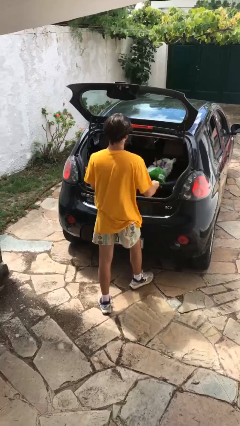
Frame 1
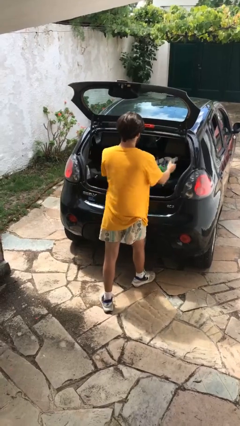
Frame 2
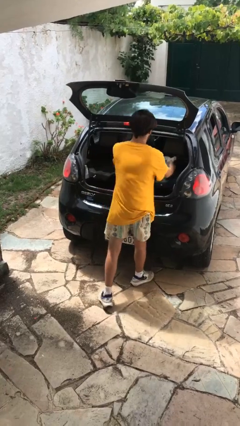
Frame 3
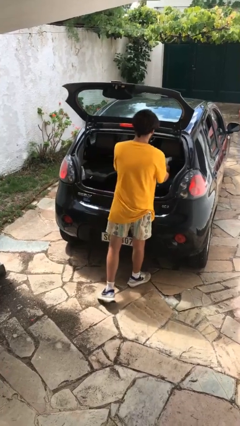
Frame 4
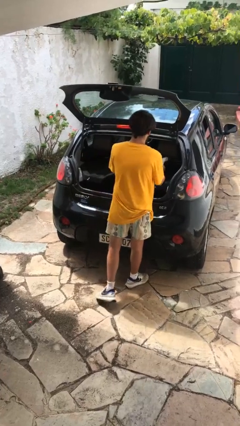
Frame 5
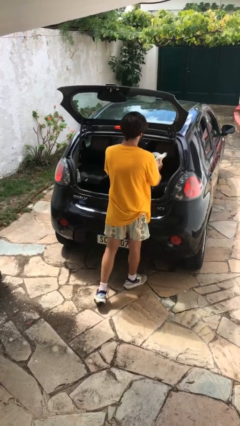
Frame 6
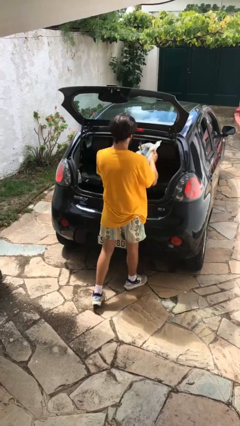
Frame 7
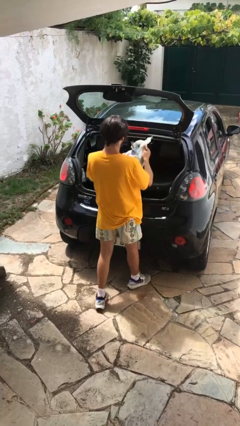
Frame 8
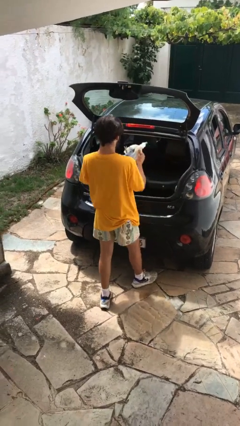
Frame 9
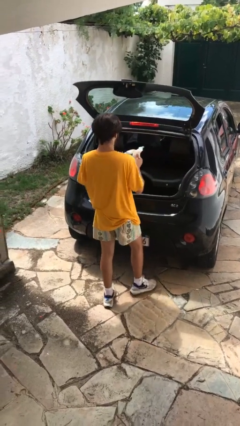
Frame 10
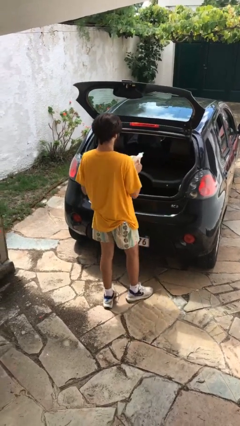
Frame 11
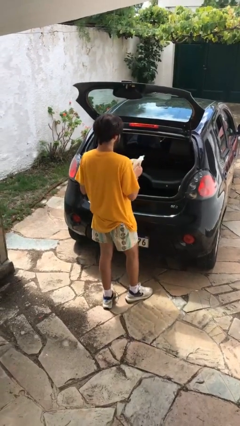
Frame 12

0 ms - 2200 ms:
person unloads car

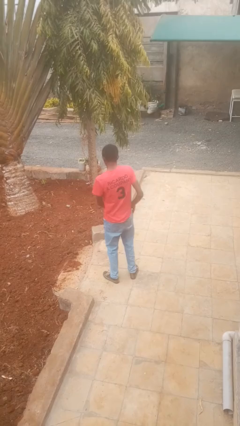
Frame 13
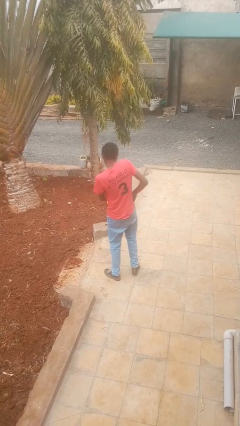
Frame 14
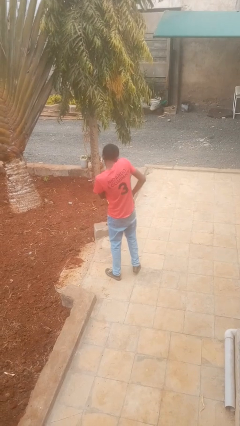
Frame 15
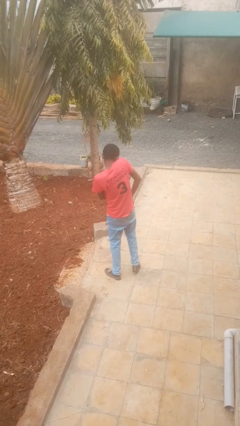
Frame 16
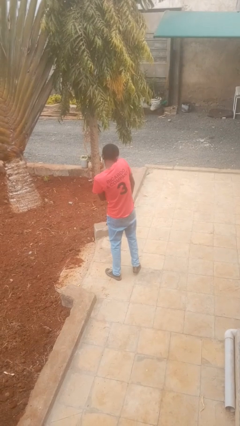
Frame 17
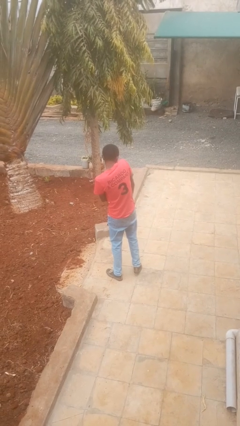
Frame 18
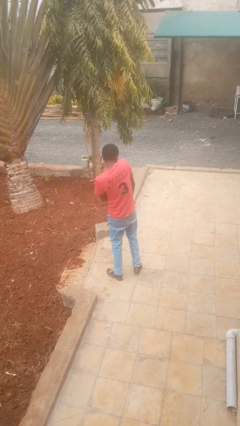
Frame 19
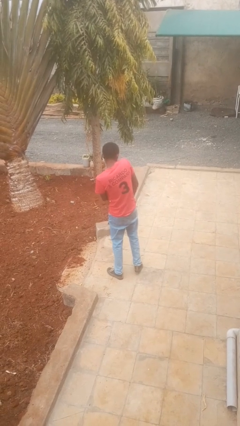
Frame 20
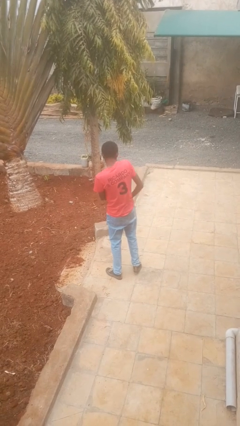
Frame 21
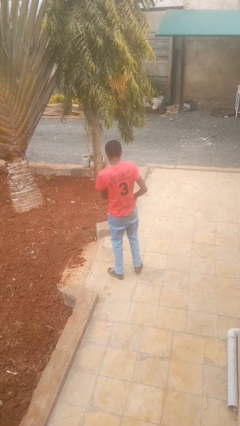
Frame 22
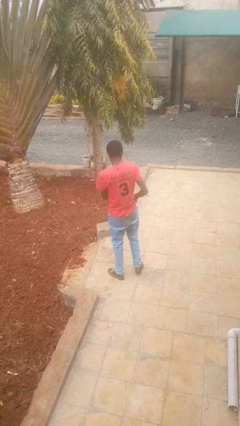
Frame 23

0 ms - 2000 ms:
person puts hands in back pockets

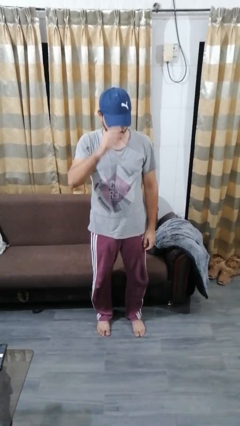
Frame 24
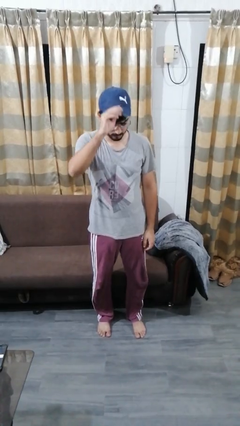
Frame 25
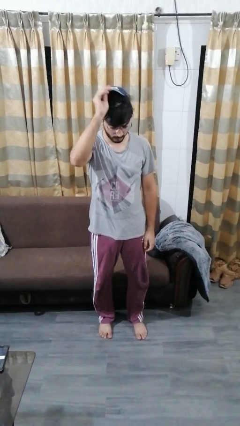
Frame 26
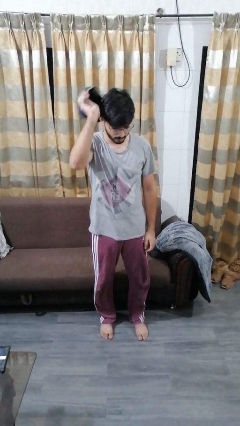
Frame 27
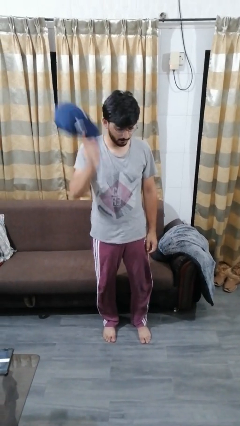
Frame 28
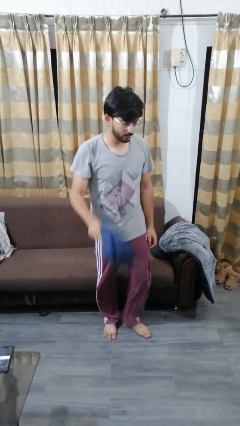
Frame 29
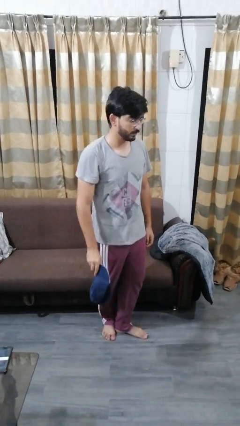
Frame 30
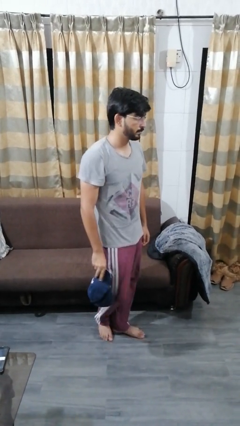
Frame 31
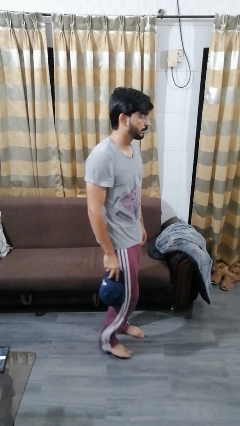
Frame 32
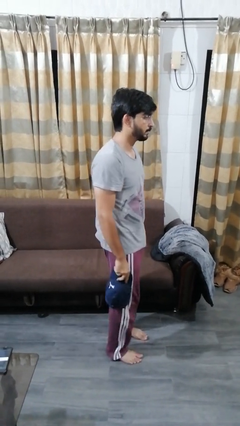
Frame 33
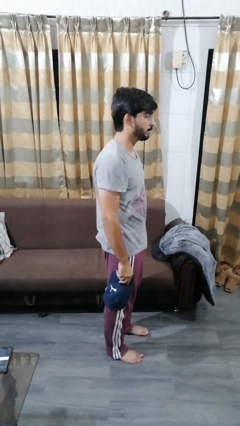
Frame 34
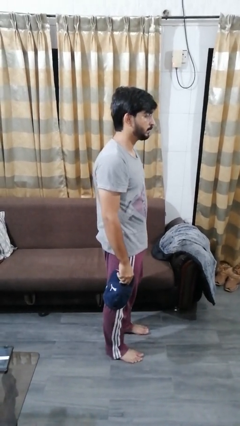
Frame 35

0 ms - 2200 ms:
person takes off hat

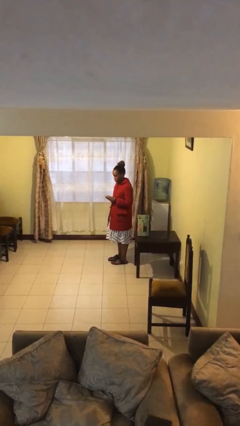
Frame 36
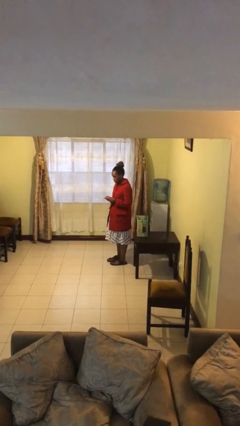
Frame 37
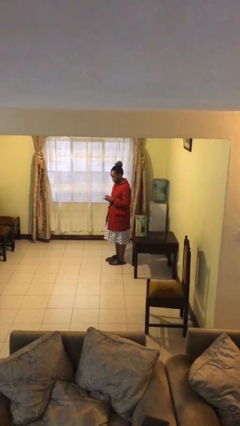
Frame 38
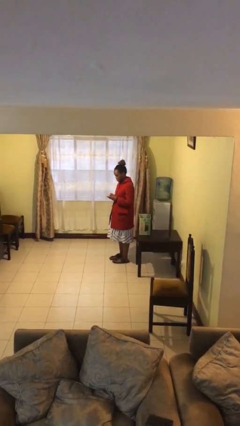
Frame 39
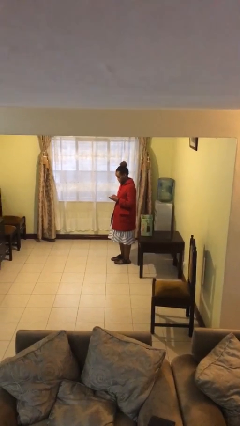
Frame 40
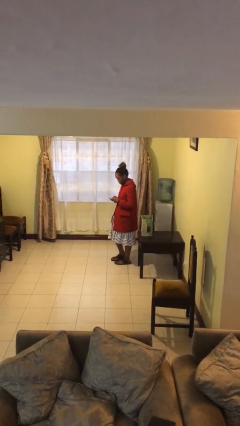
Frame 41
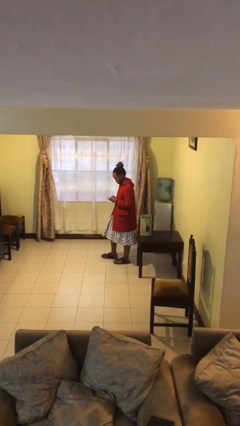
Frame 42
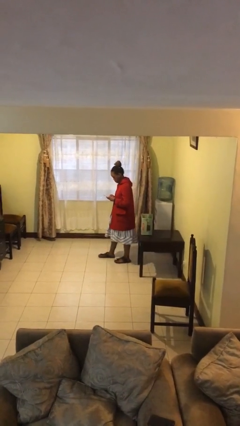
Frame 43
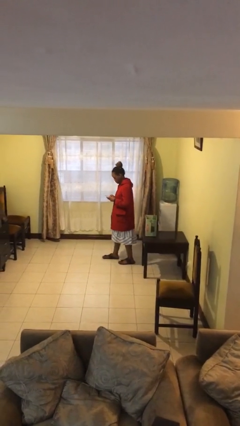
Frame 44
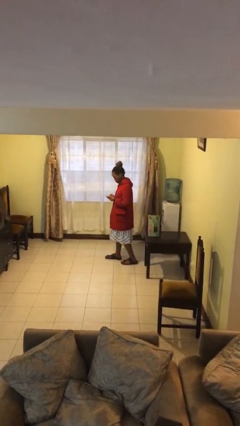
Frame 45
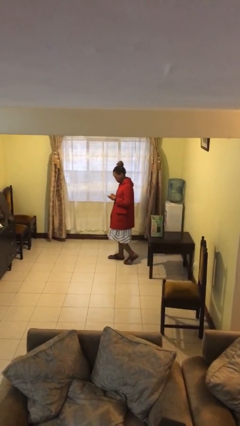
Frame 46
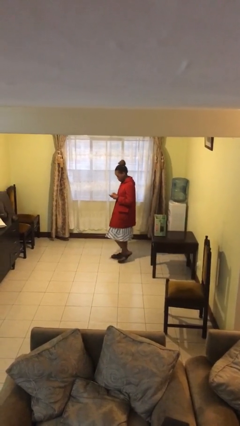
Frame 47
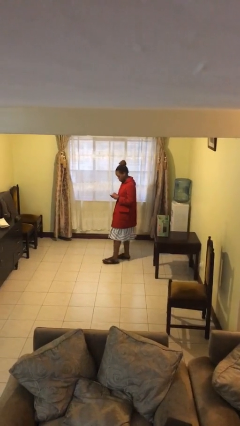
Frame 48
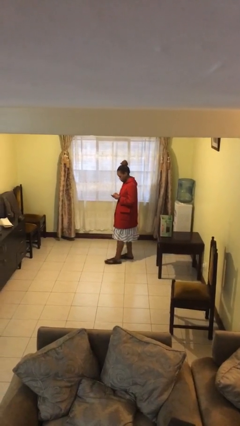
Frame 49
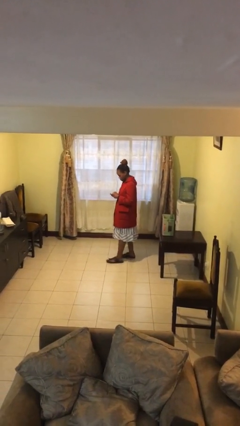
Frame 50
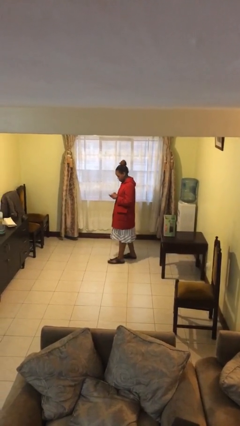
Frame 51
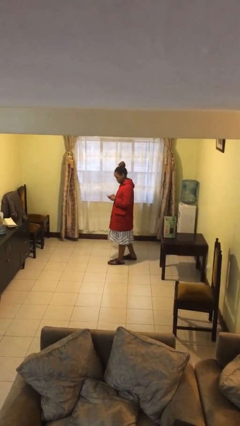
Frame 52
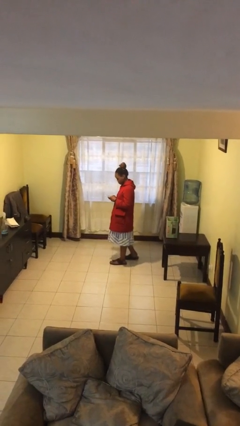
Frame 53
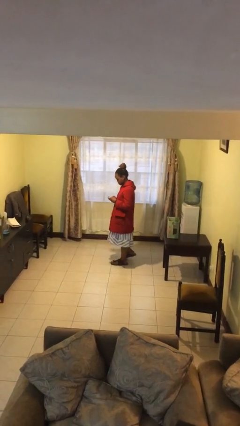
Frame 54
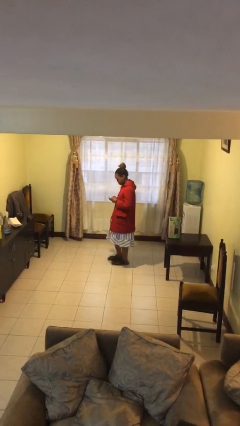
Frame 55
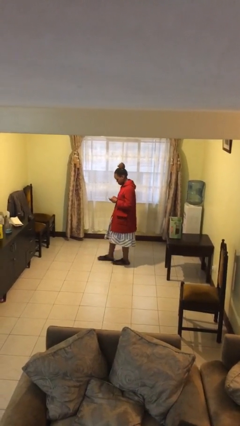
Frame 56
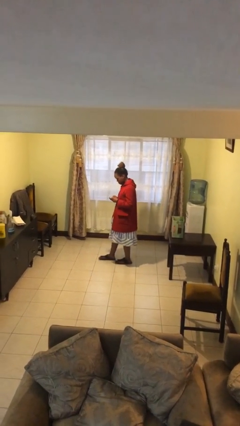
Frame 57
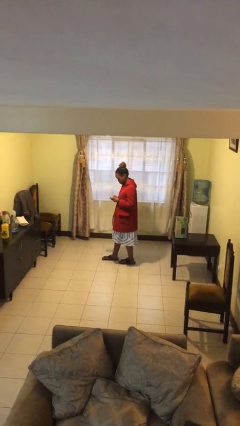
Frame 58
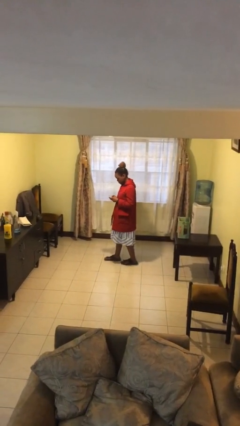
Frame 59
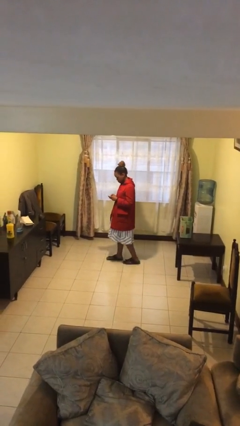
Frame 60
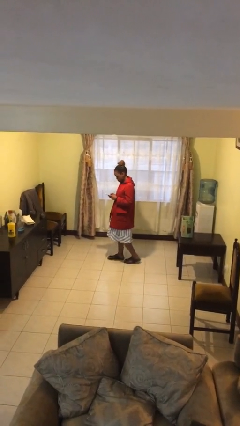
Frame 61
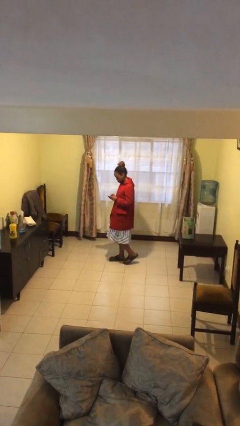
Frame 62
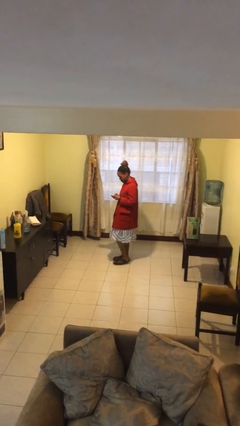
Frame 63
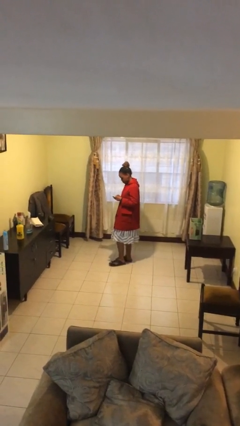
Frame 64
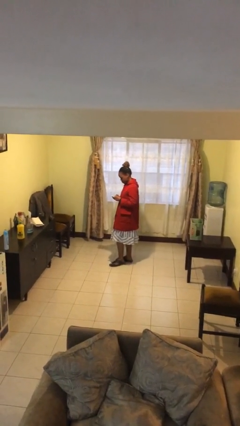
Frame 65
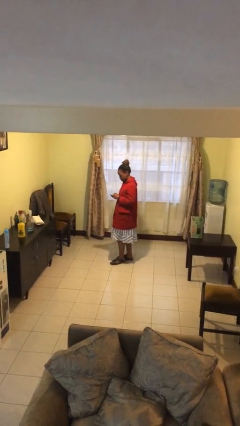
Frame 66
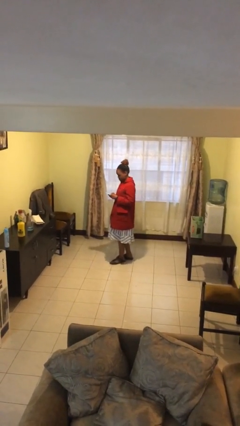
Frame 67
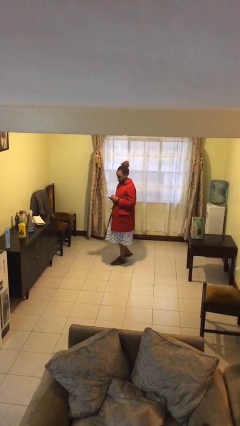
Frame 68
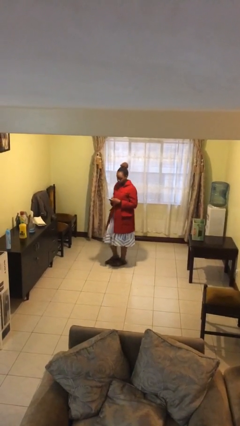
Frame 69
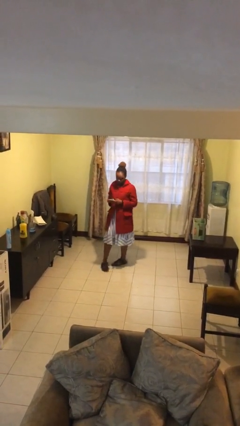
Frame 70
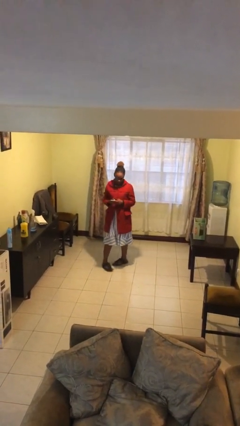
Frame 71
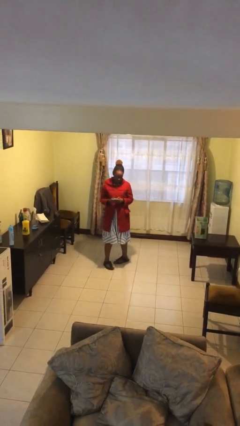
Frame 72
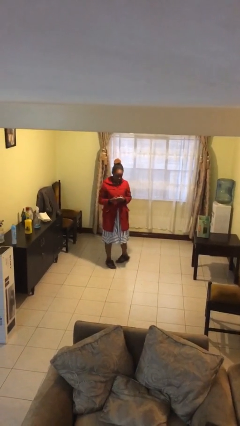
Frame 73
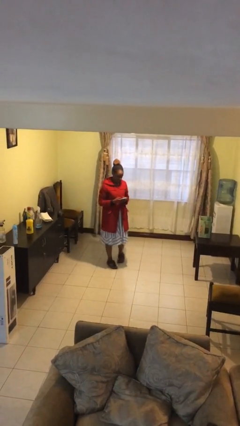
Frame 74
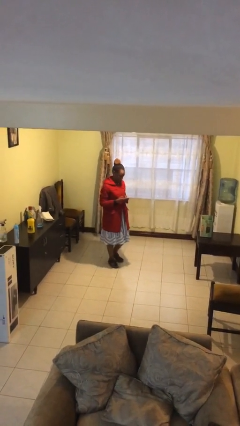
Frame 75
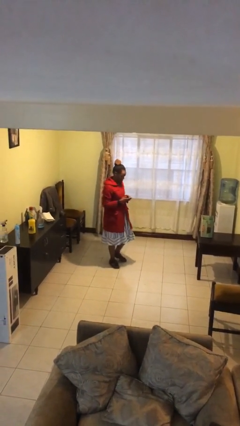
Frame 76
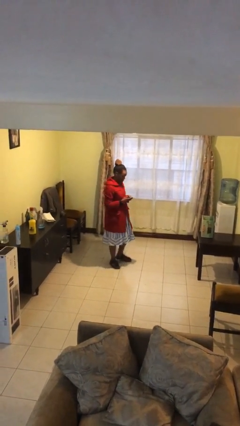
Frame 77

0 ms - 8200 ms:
person texts on phone

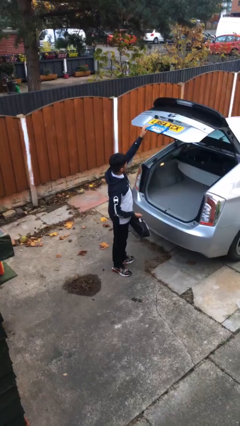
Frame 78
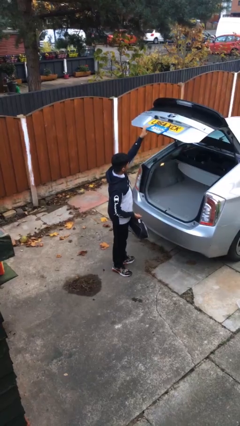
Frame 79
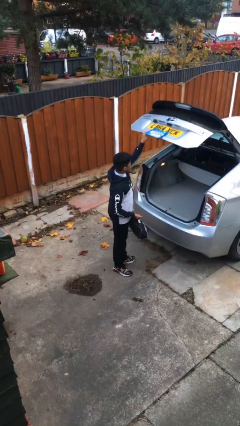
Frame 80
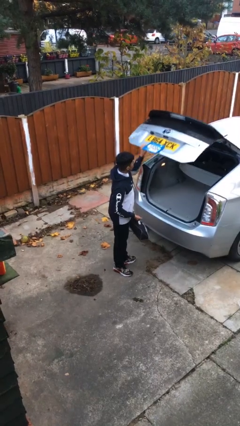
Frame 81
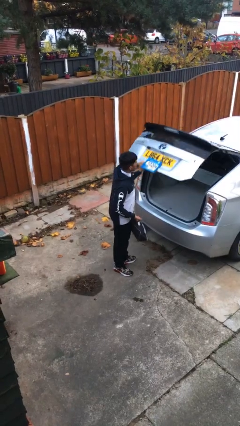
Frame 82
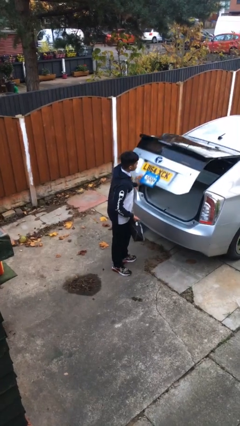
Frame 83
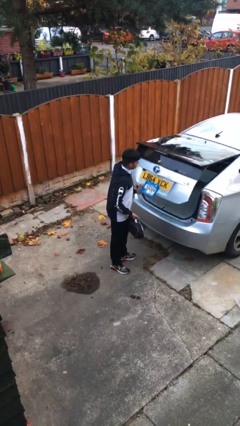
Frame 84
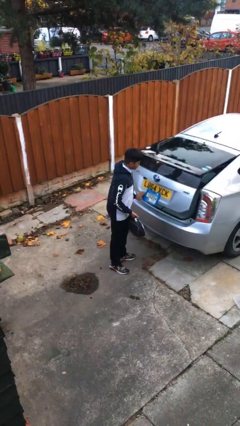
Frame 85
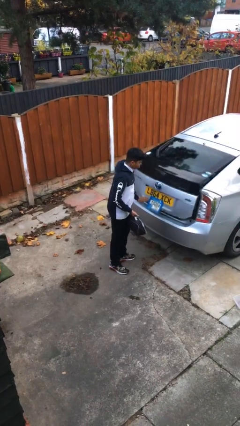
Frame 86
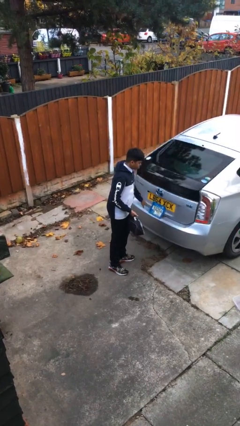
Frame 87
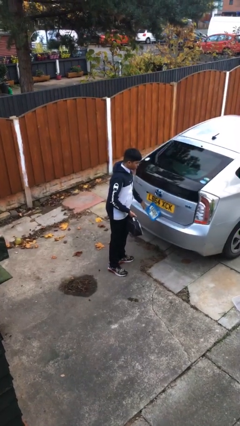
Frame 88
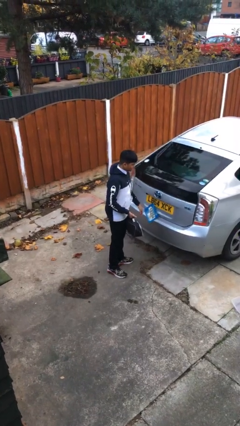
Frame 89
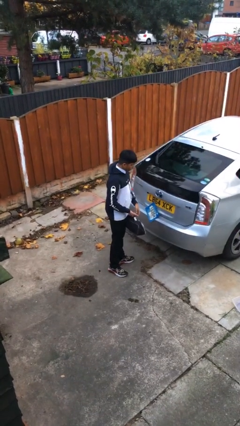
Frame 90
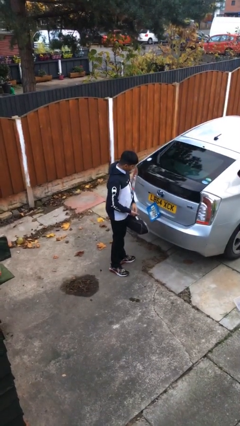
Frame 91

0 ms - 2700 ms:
person closes car trunk
